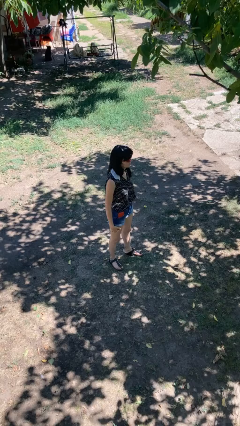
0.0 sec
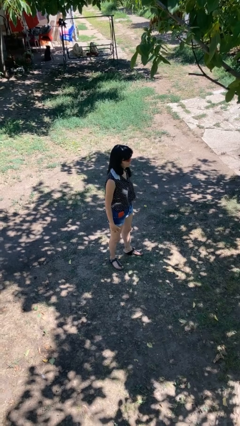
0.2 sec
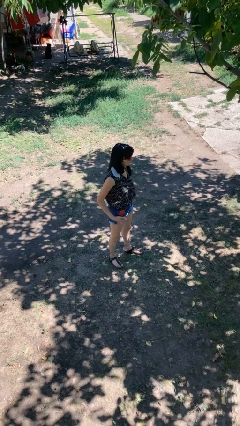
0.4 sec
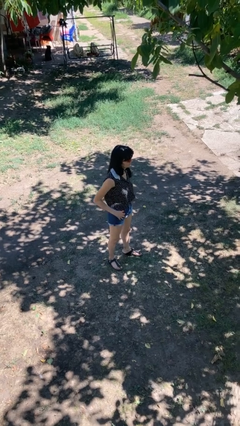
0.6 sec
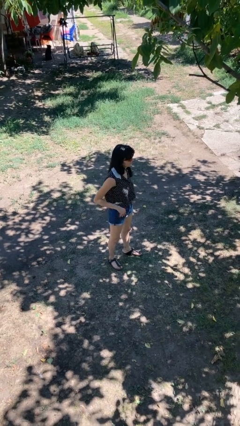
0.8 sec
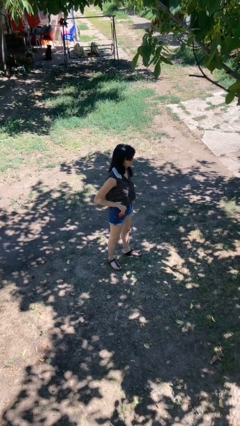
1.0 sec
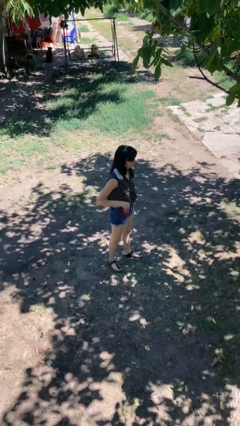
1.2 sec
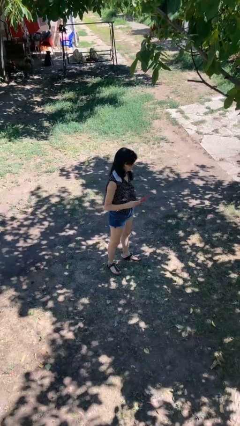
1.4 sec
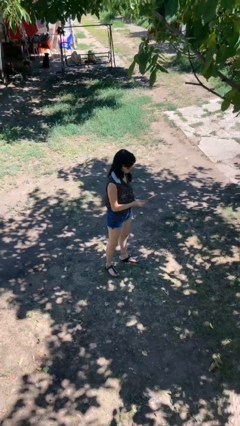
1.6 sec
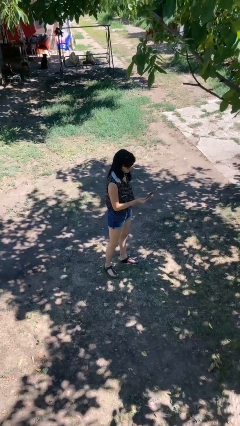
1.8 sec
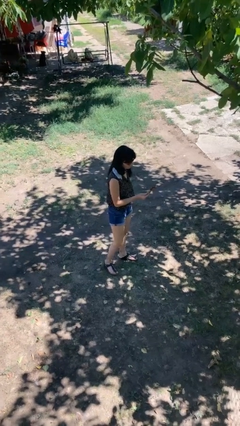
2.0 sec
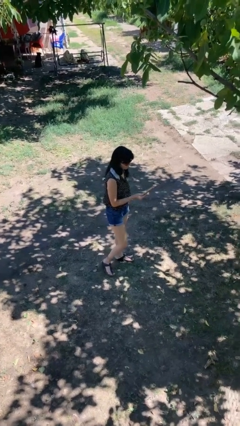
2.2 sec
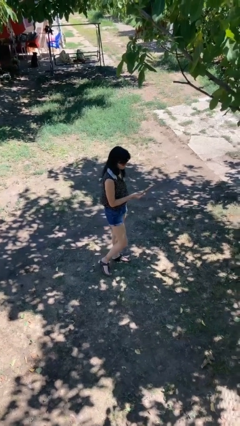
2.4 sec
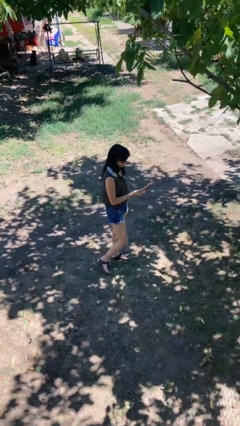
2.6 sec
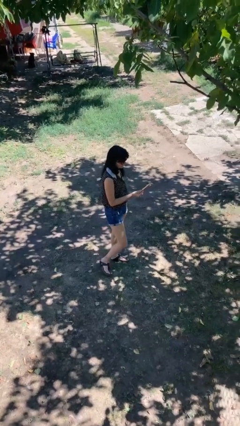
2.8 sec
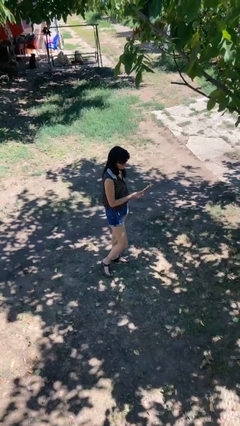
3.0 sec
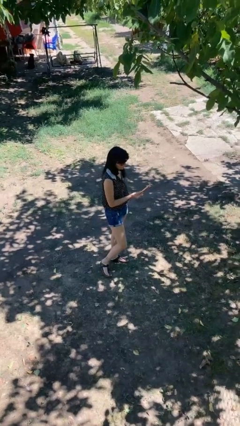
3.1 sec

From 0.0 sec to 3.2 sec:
person takes phone from pocket

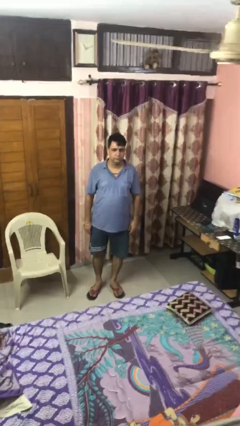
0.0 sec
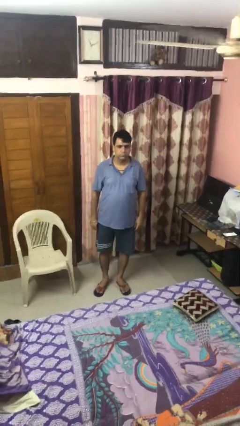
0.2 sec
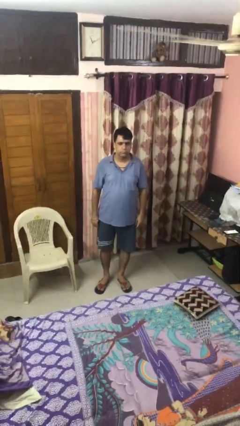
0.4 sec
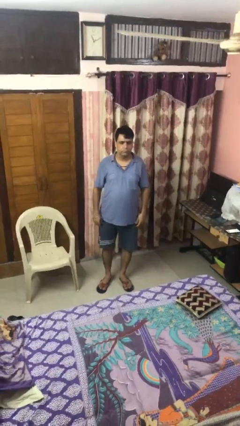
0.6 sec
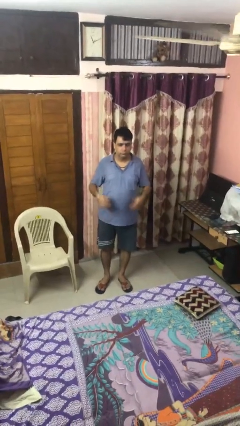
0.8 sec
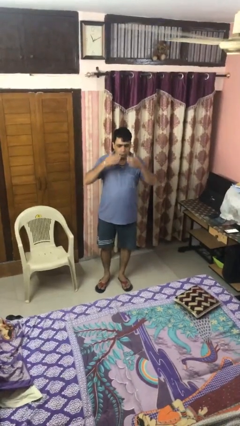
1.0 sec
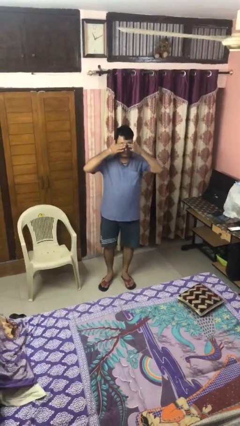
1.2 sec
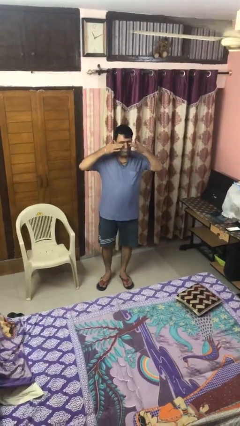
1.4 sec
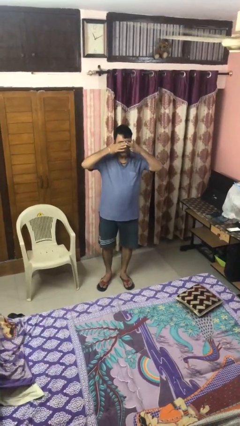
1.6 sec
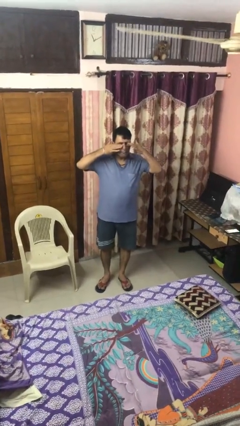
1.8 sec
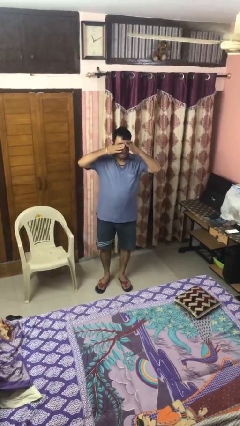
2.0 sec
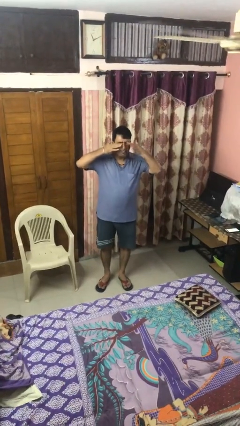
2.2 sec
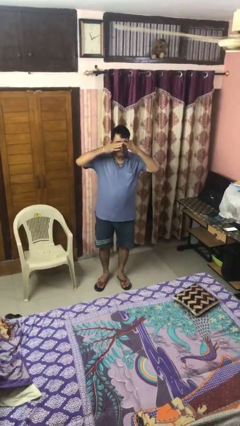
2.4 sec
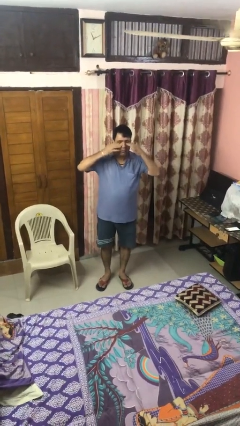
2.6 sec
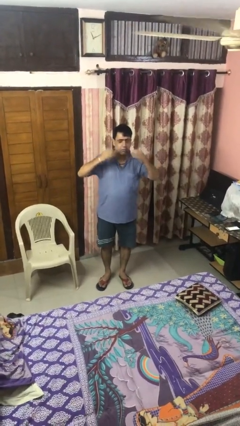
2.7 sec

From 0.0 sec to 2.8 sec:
person rubs eyes

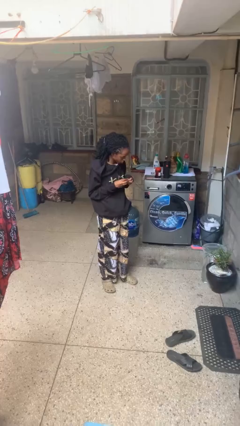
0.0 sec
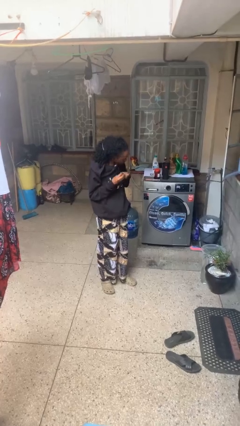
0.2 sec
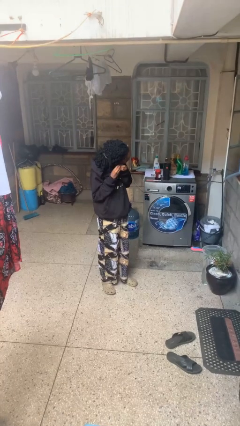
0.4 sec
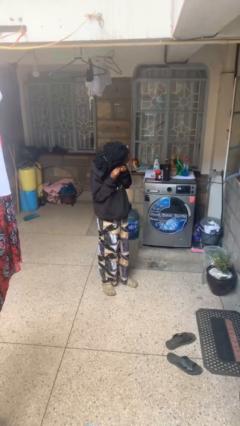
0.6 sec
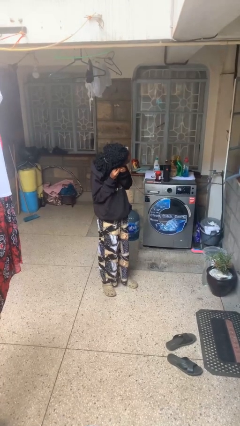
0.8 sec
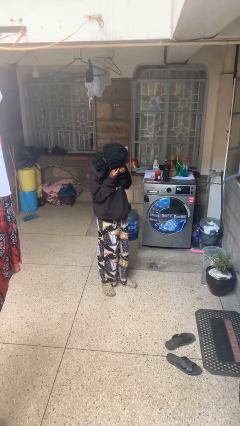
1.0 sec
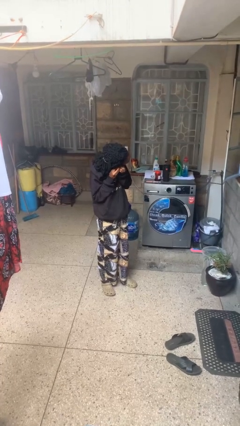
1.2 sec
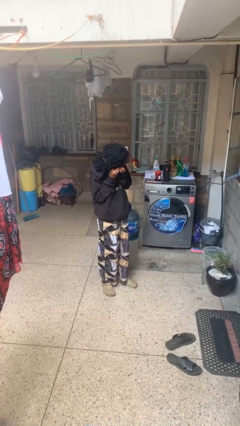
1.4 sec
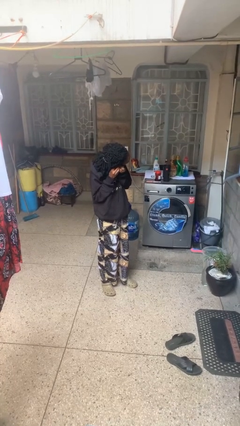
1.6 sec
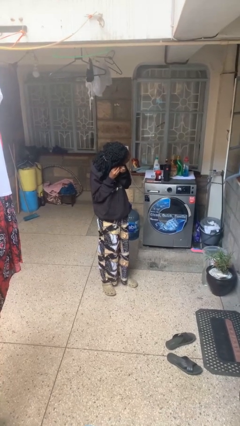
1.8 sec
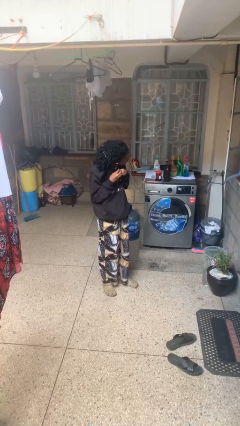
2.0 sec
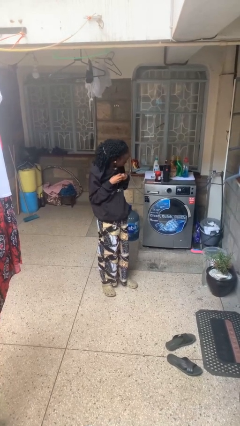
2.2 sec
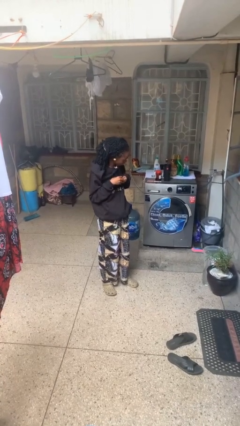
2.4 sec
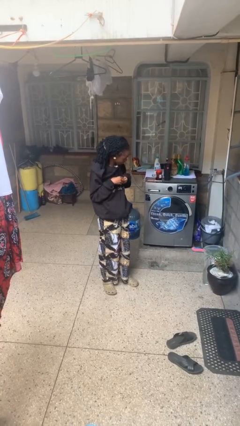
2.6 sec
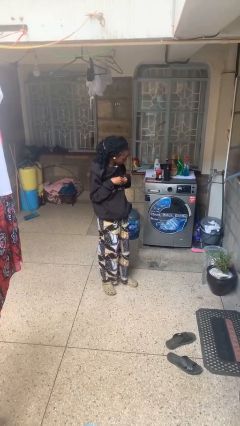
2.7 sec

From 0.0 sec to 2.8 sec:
person puts on earrings

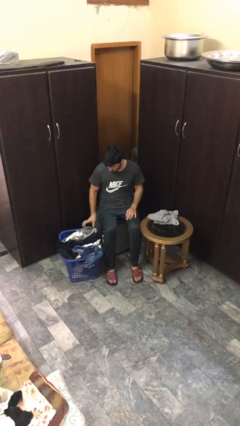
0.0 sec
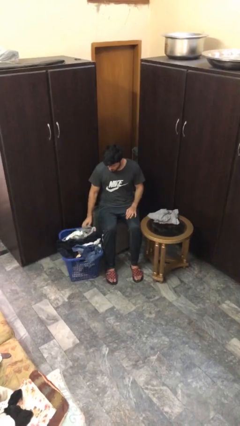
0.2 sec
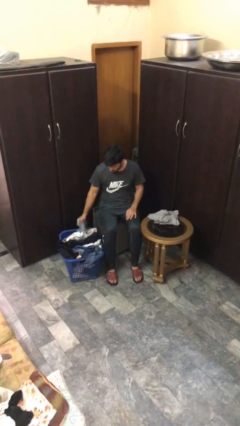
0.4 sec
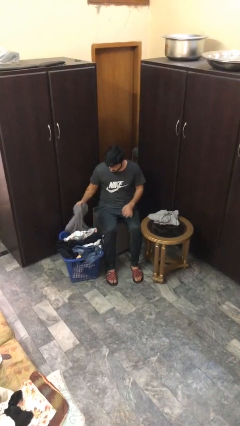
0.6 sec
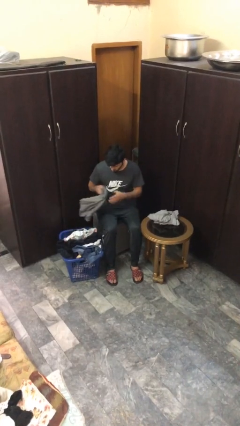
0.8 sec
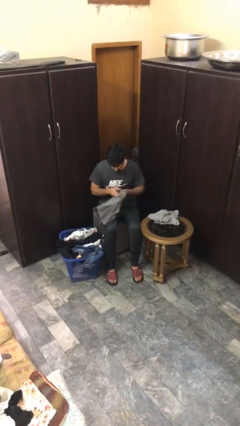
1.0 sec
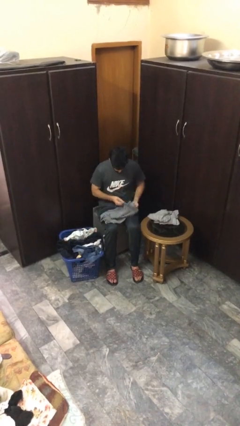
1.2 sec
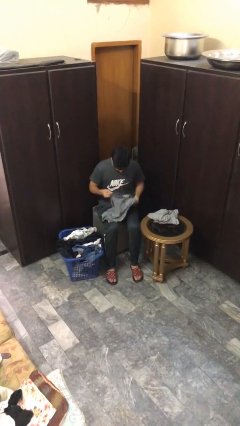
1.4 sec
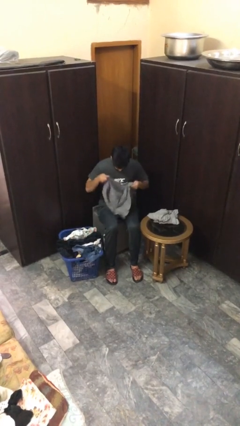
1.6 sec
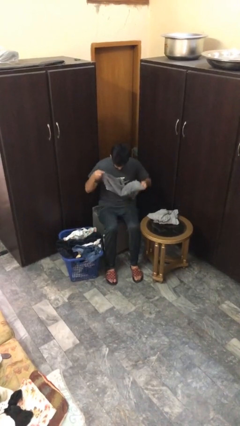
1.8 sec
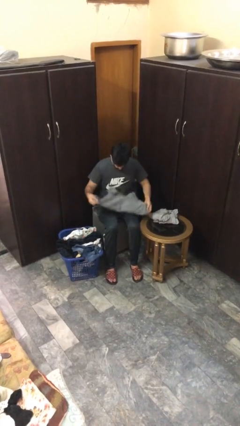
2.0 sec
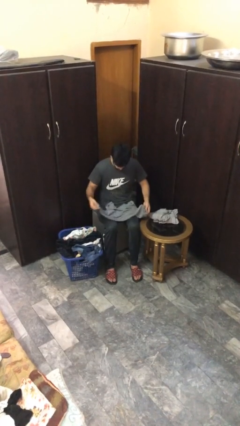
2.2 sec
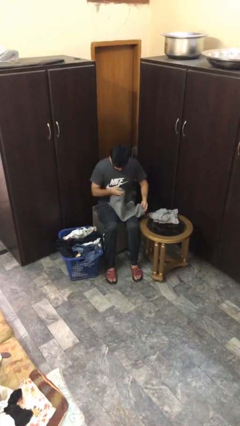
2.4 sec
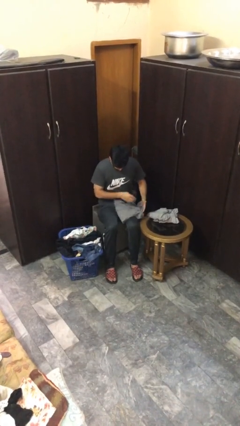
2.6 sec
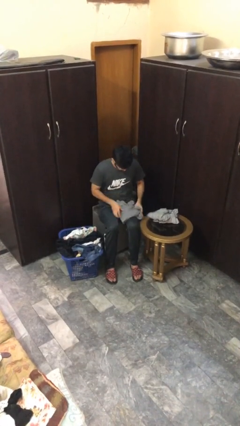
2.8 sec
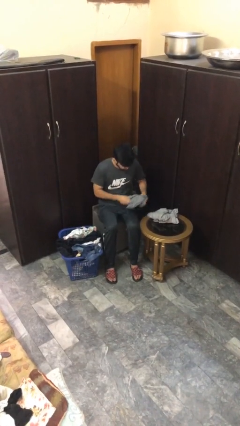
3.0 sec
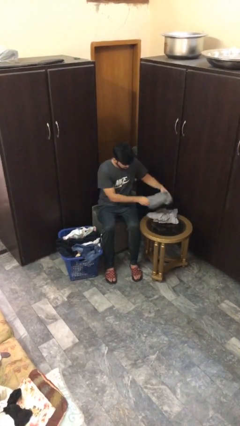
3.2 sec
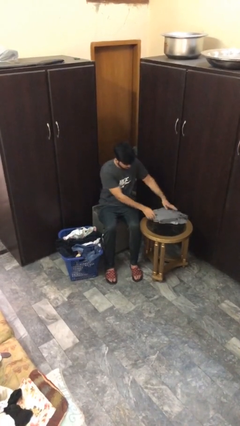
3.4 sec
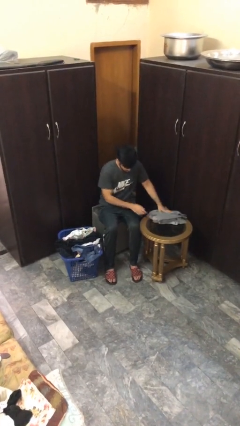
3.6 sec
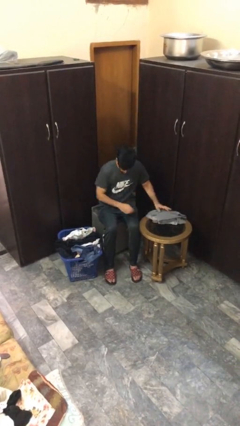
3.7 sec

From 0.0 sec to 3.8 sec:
person folds shirt

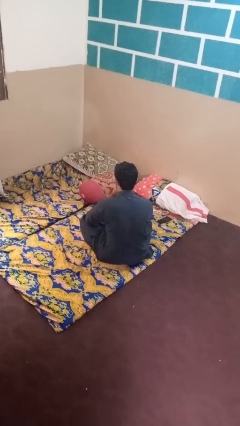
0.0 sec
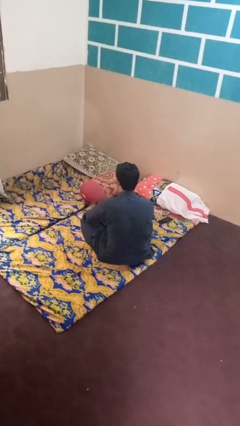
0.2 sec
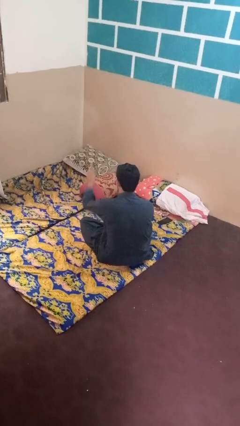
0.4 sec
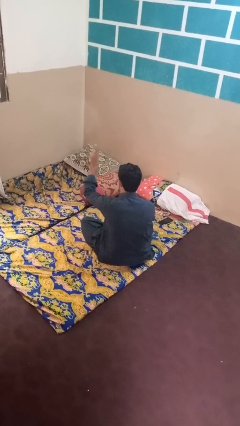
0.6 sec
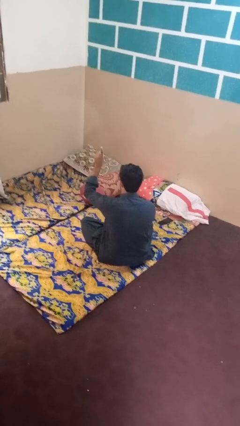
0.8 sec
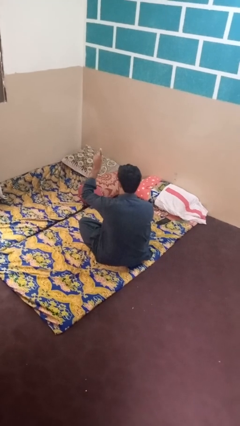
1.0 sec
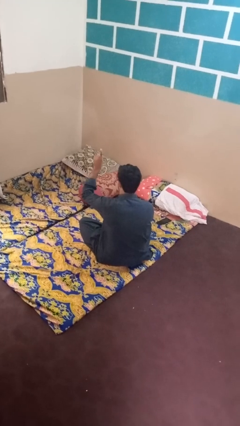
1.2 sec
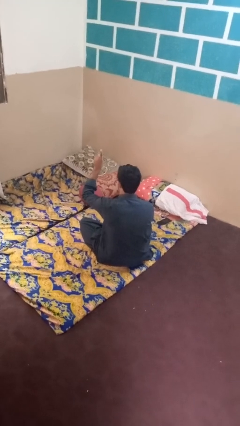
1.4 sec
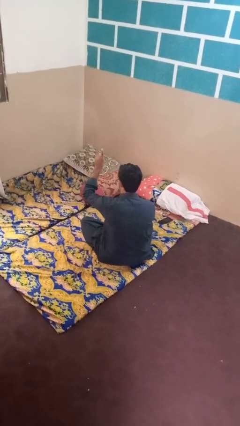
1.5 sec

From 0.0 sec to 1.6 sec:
person gestures hang loose

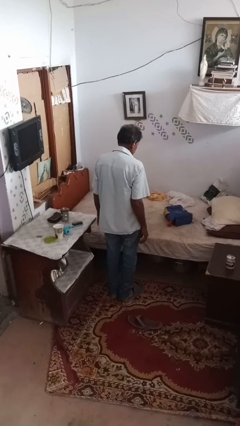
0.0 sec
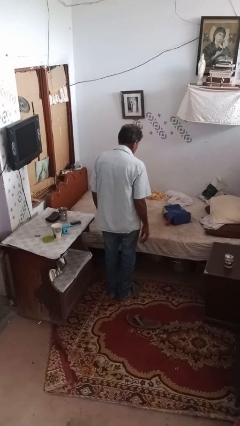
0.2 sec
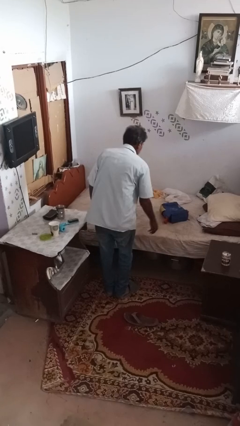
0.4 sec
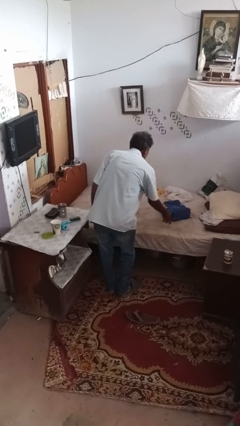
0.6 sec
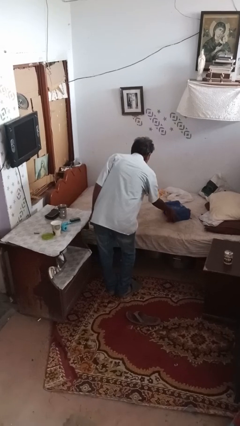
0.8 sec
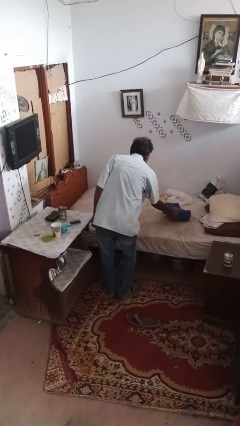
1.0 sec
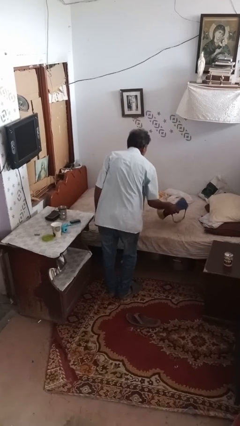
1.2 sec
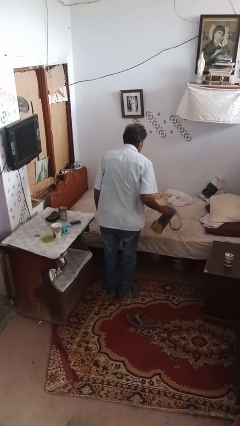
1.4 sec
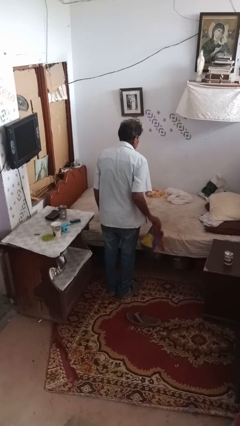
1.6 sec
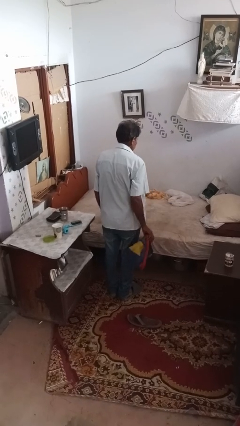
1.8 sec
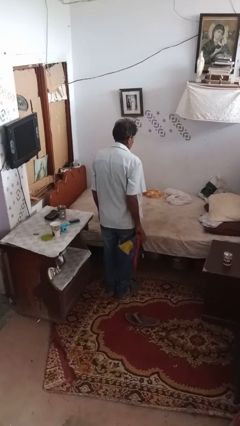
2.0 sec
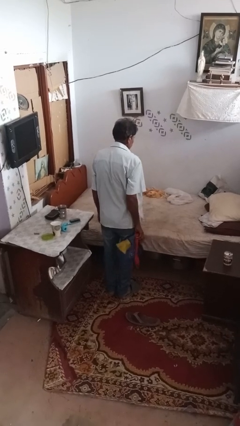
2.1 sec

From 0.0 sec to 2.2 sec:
person picks up object from bed

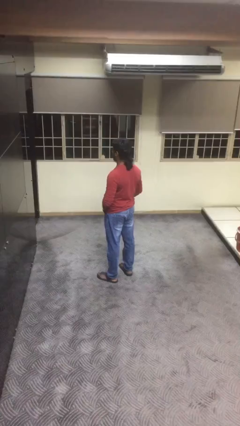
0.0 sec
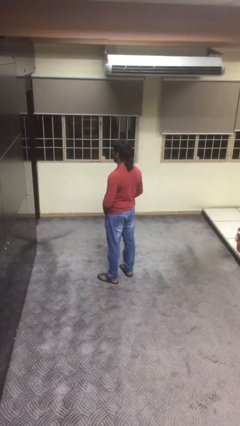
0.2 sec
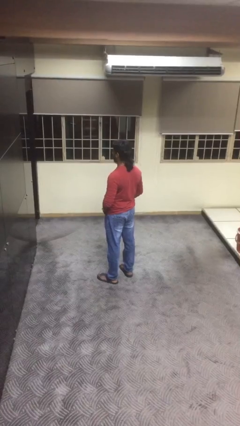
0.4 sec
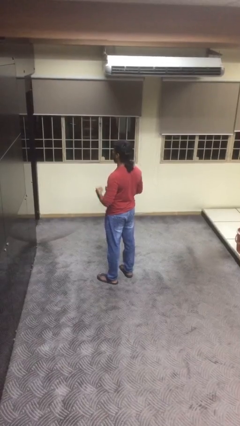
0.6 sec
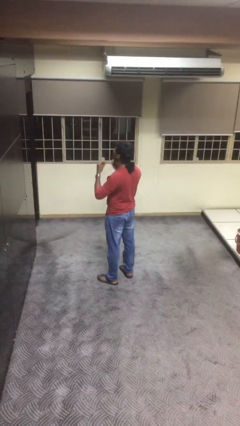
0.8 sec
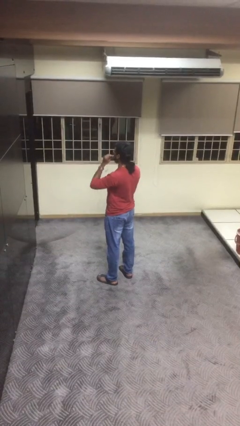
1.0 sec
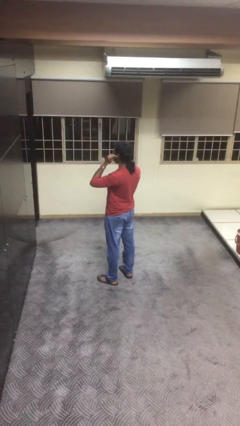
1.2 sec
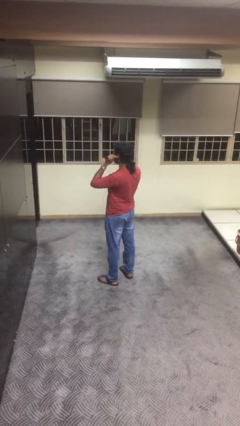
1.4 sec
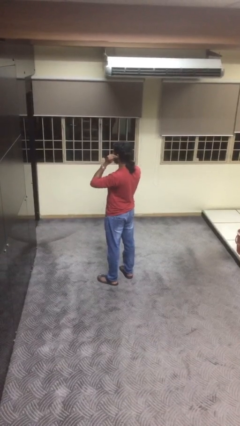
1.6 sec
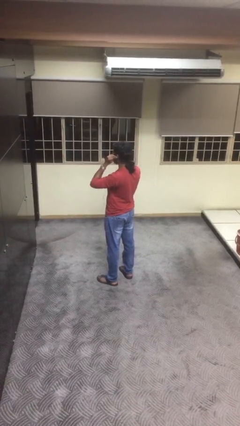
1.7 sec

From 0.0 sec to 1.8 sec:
person puts on headphones
